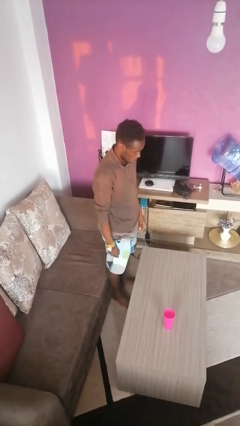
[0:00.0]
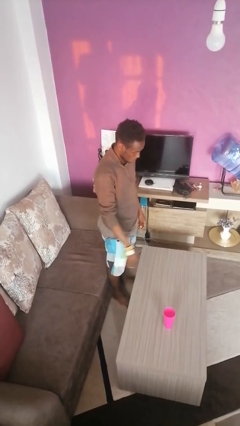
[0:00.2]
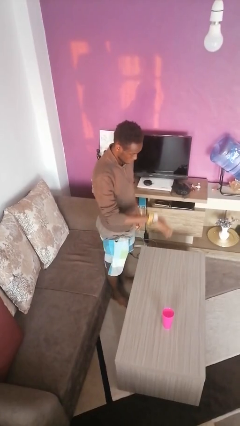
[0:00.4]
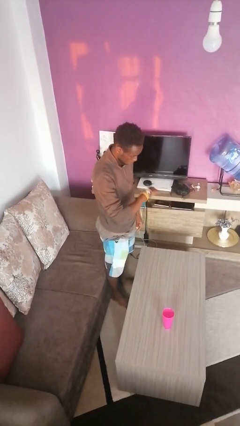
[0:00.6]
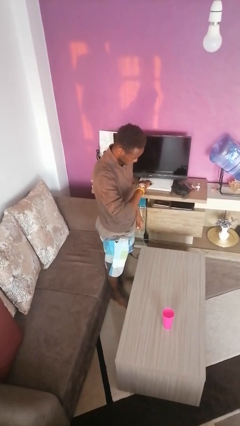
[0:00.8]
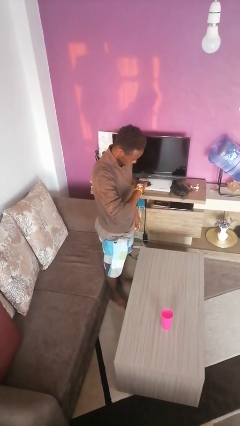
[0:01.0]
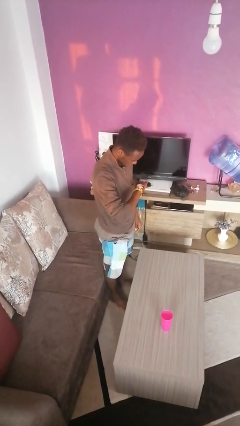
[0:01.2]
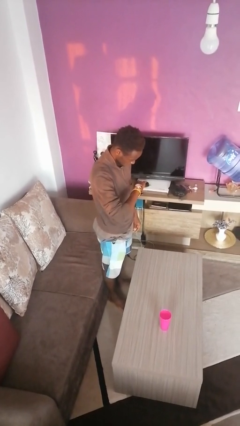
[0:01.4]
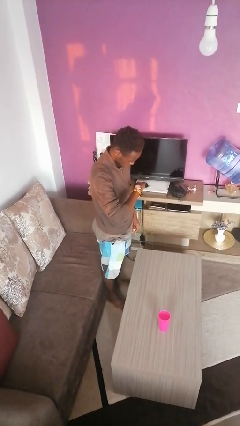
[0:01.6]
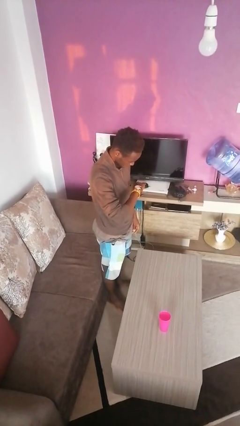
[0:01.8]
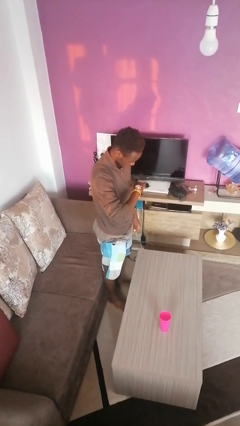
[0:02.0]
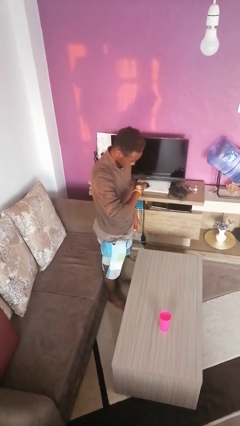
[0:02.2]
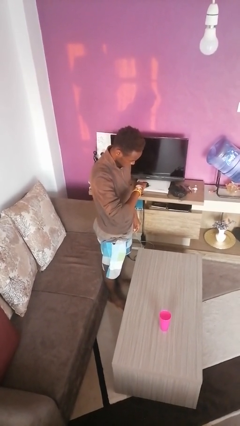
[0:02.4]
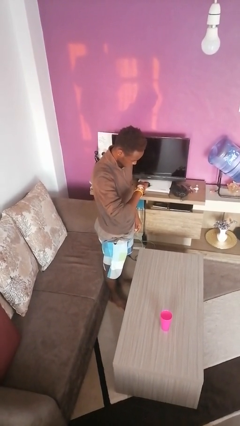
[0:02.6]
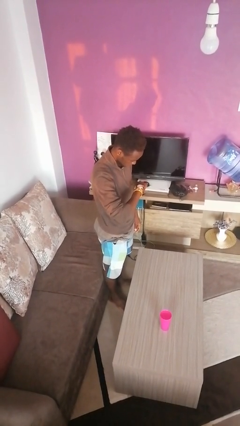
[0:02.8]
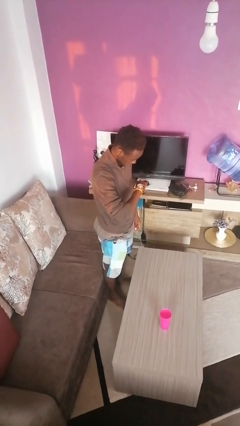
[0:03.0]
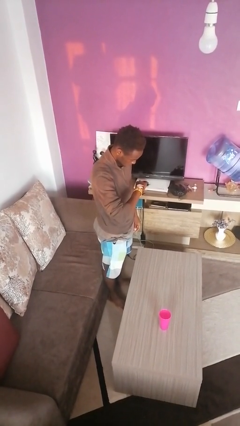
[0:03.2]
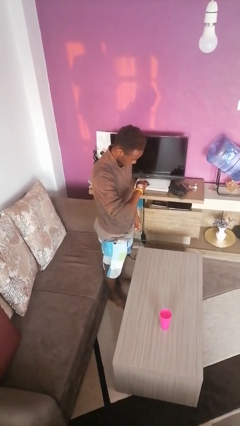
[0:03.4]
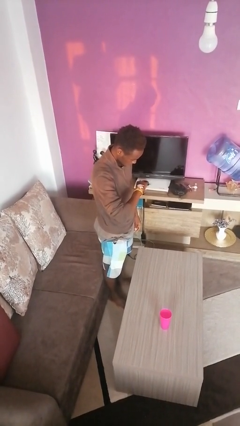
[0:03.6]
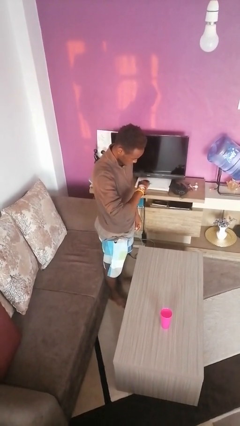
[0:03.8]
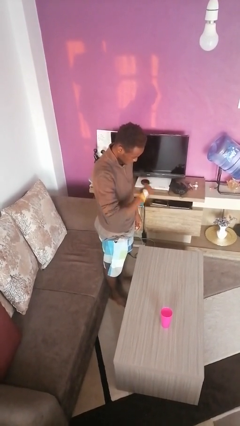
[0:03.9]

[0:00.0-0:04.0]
person looks at wristwatch

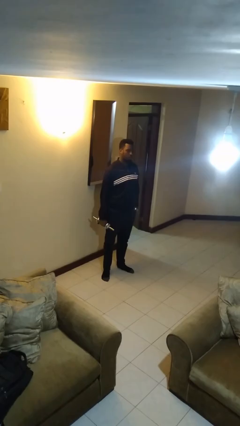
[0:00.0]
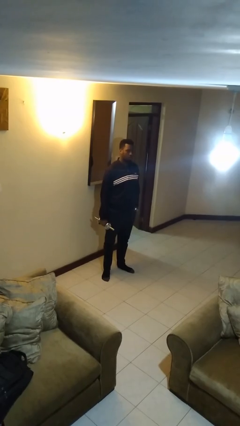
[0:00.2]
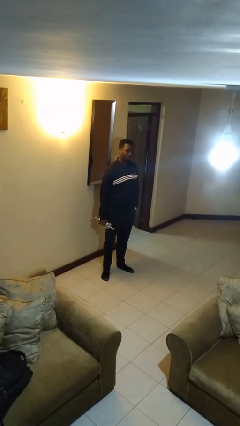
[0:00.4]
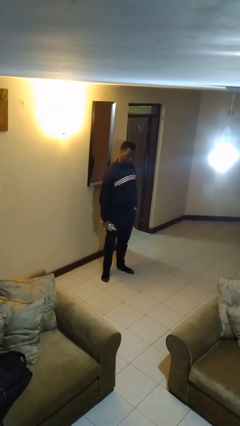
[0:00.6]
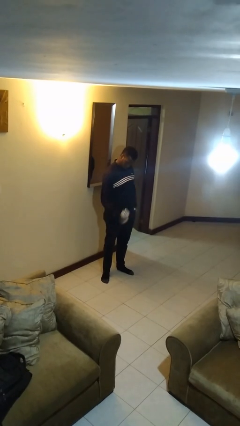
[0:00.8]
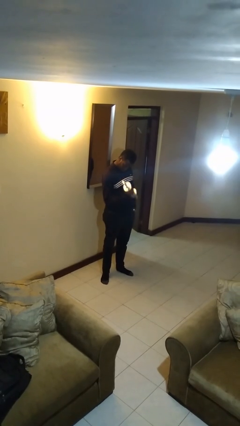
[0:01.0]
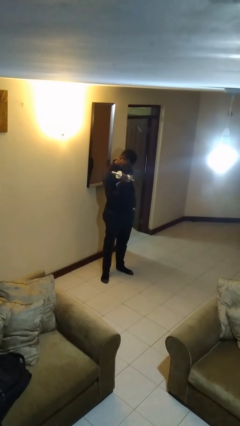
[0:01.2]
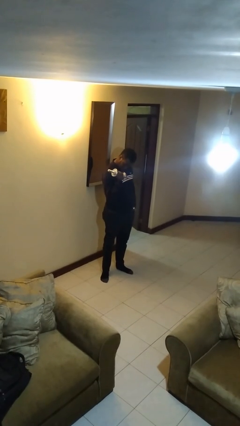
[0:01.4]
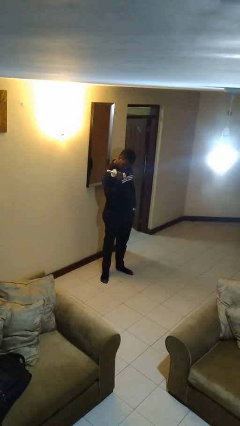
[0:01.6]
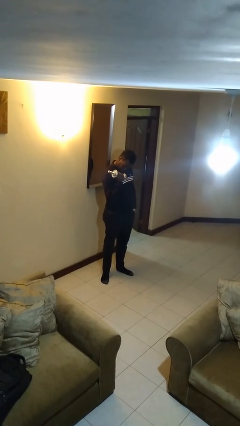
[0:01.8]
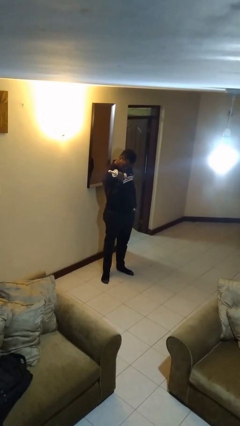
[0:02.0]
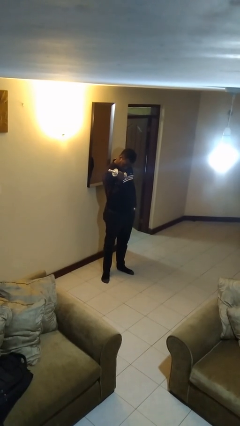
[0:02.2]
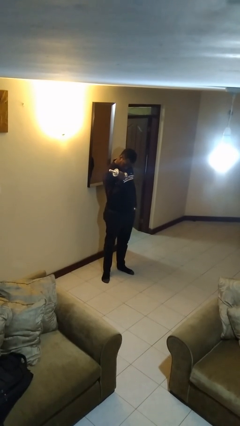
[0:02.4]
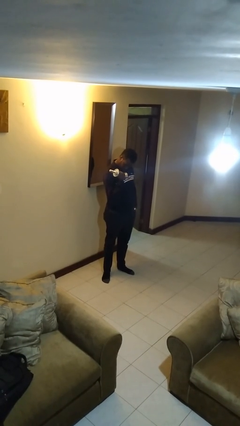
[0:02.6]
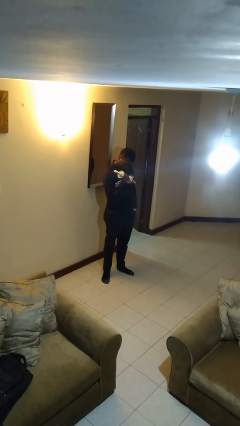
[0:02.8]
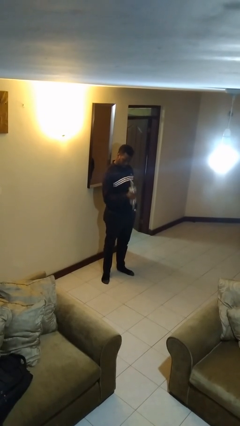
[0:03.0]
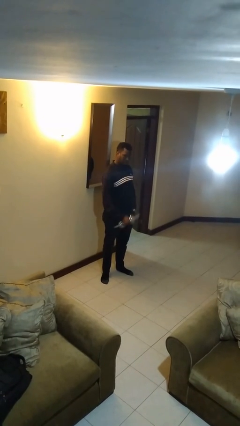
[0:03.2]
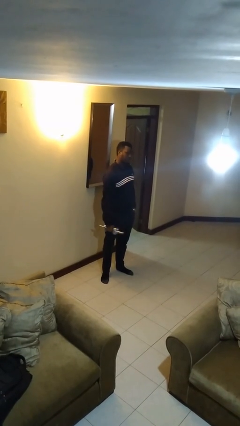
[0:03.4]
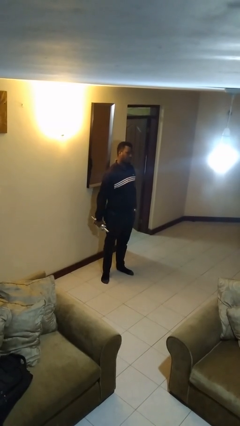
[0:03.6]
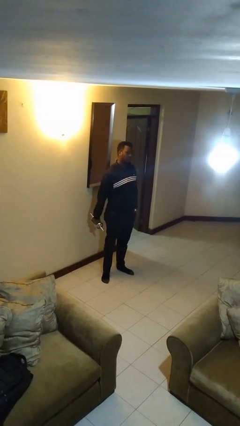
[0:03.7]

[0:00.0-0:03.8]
person lifts dumbbells

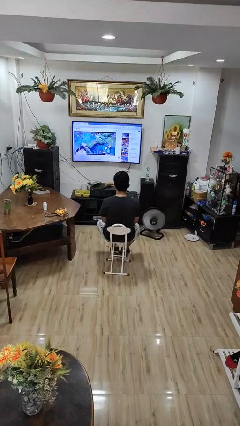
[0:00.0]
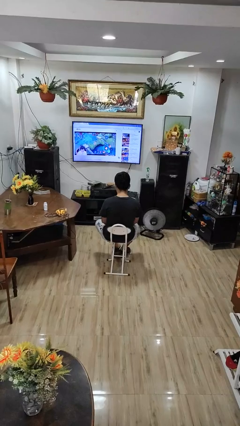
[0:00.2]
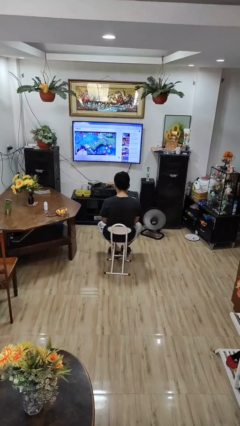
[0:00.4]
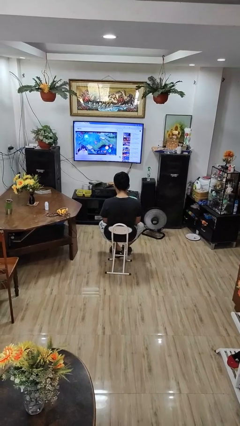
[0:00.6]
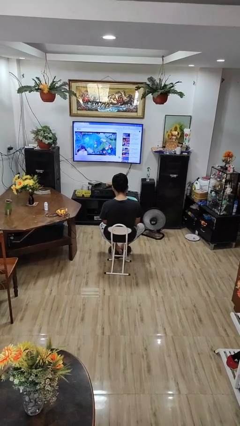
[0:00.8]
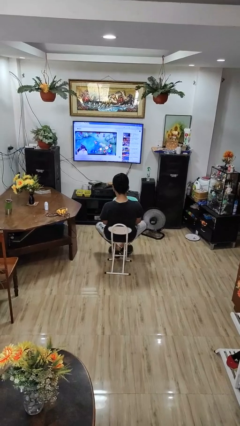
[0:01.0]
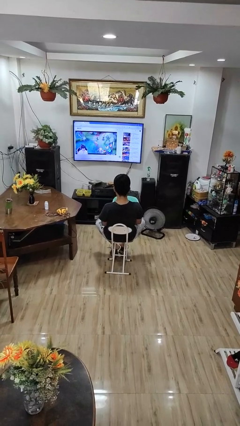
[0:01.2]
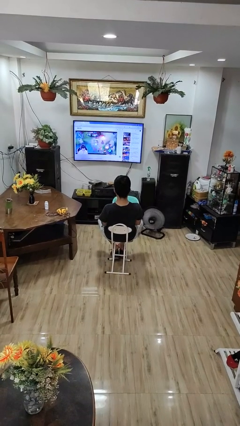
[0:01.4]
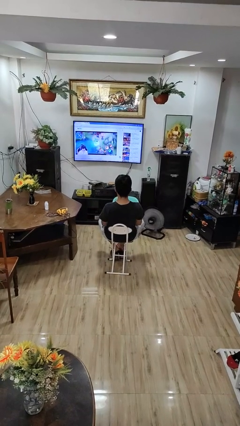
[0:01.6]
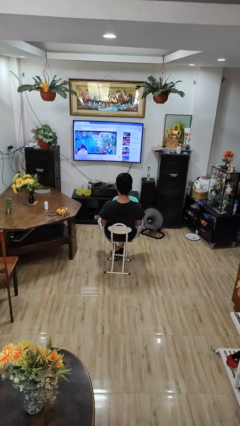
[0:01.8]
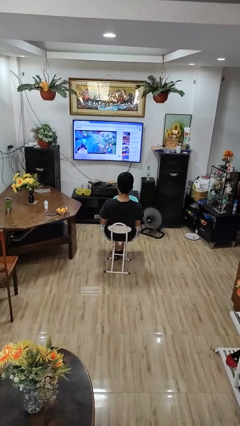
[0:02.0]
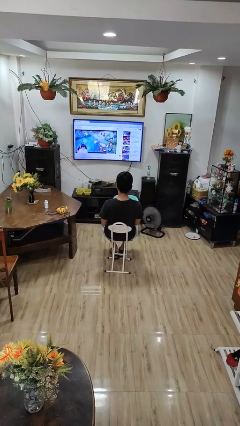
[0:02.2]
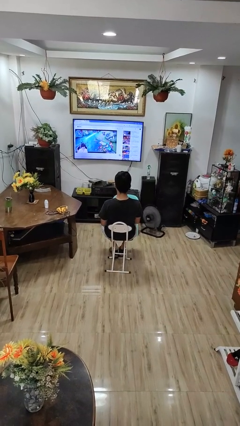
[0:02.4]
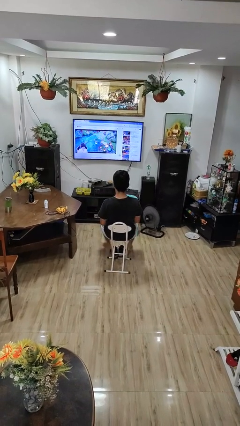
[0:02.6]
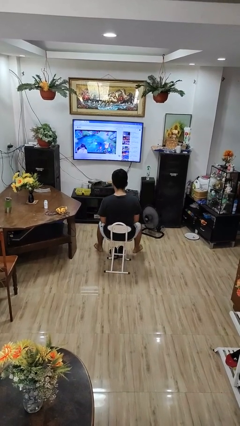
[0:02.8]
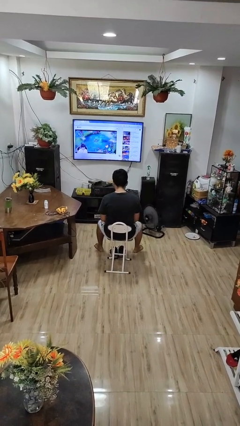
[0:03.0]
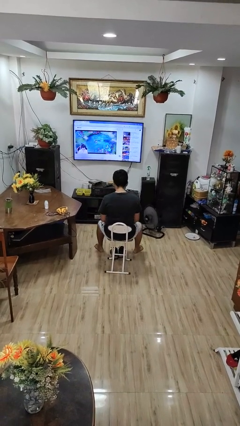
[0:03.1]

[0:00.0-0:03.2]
person takes off shoes

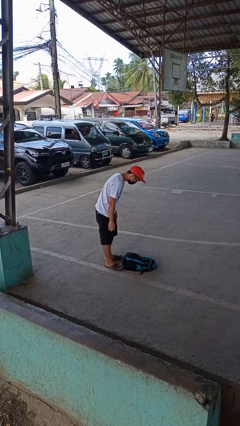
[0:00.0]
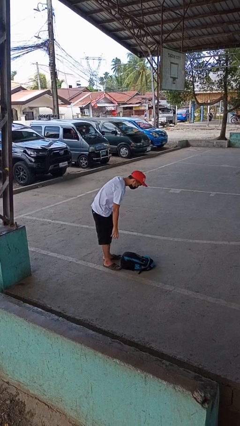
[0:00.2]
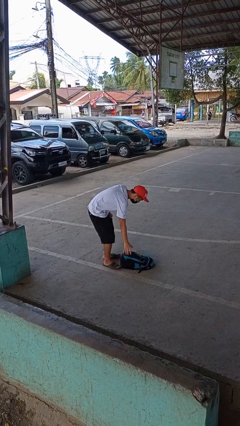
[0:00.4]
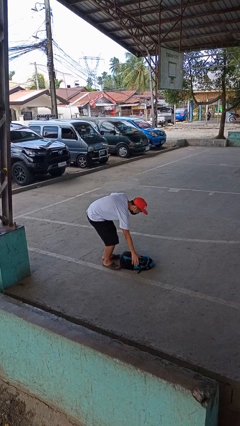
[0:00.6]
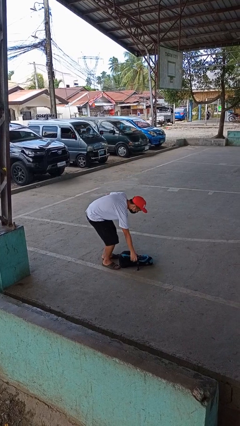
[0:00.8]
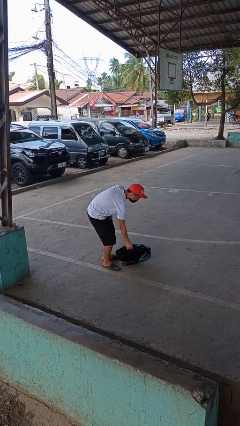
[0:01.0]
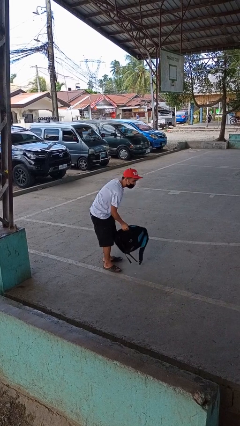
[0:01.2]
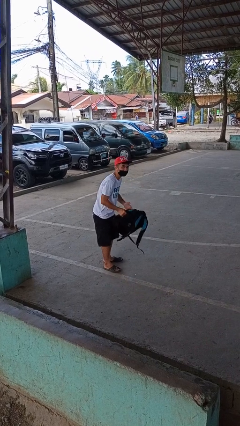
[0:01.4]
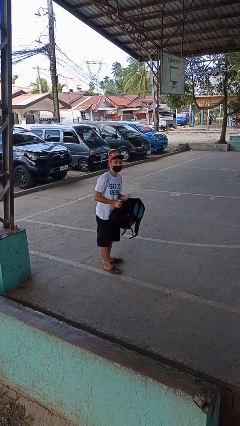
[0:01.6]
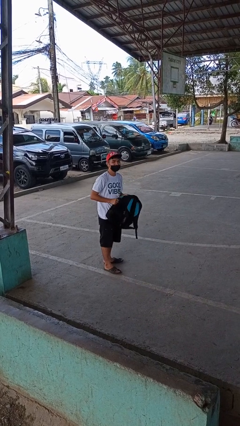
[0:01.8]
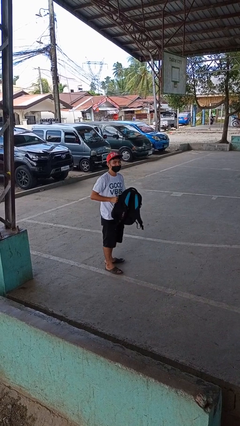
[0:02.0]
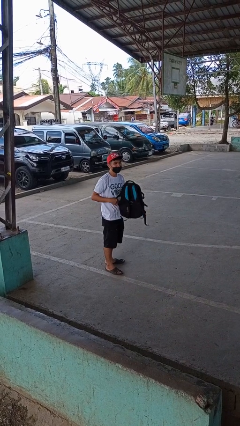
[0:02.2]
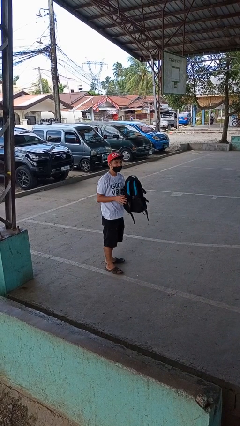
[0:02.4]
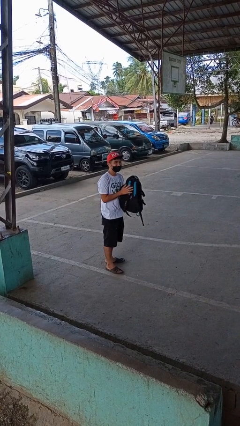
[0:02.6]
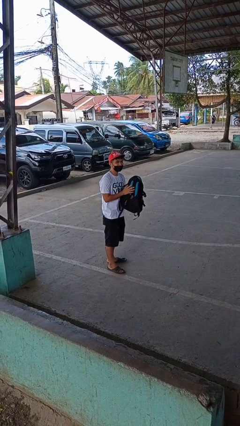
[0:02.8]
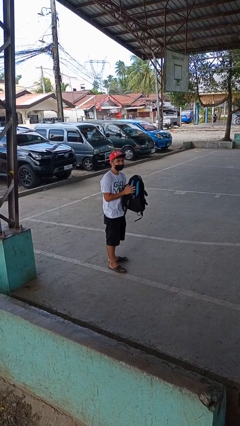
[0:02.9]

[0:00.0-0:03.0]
person picks up object from floor

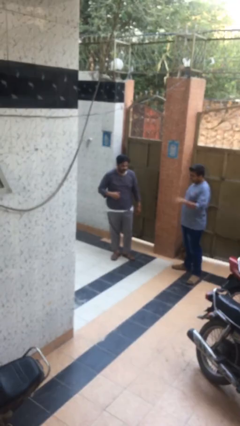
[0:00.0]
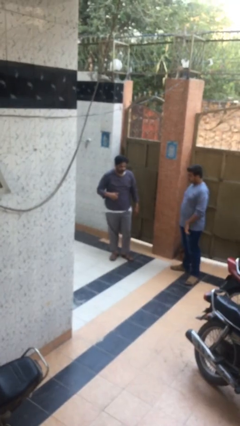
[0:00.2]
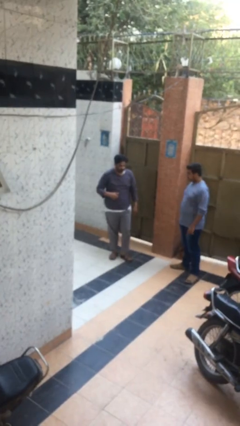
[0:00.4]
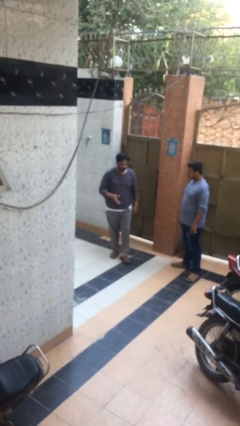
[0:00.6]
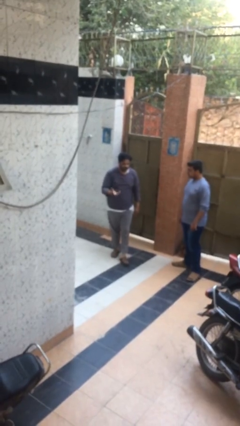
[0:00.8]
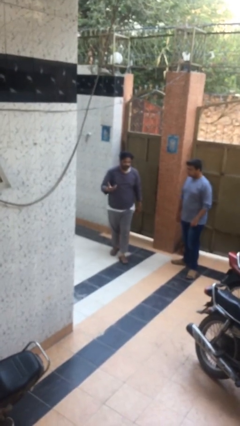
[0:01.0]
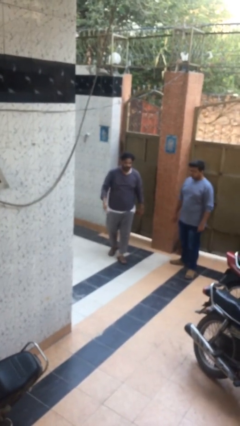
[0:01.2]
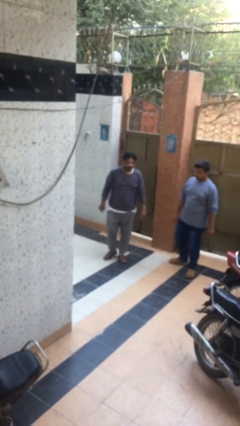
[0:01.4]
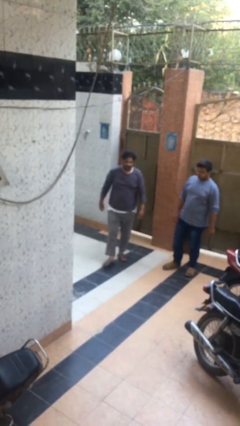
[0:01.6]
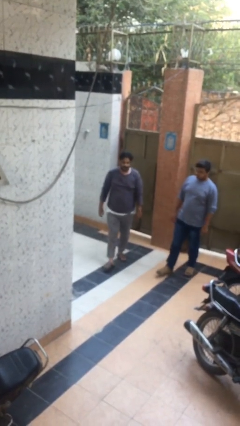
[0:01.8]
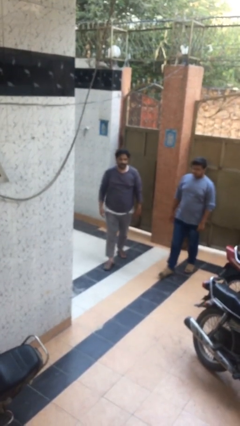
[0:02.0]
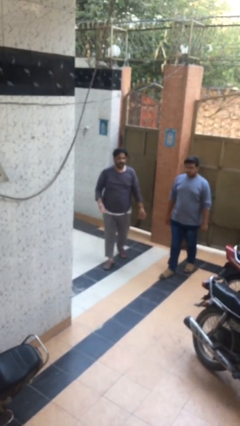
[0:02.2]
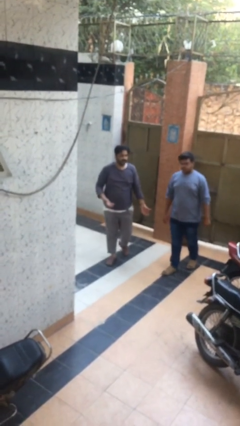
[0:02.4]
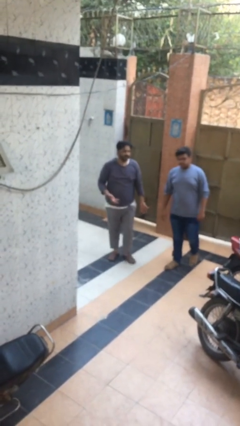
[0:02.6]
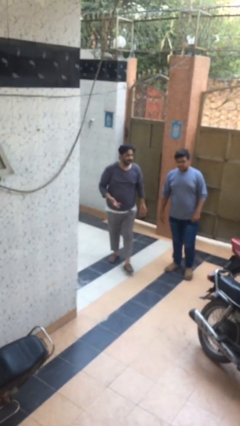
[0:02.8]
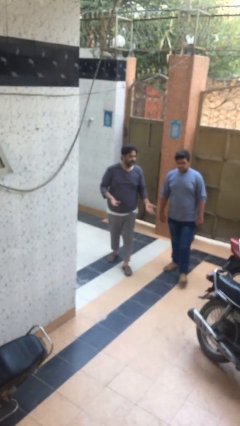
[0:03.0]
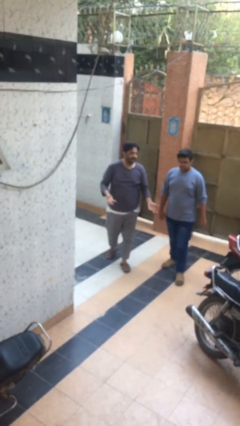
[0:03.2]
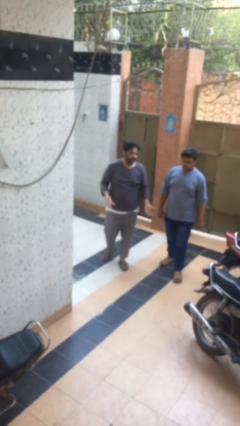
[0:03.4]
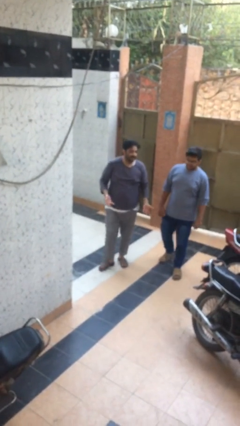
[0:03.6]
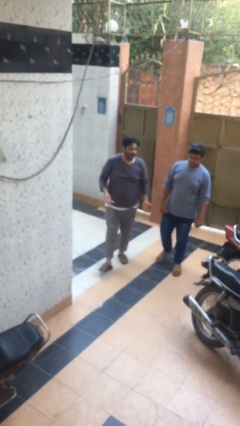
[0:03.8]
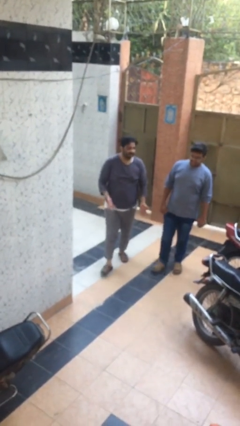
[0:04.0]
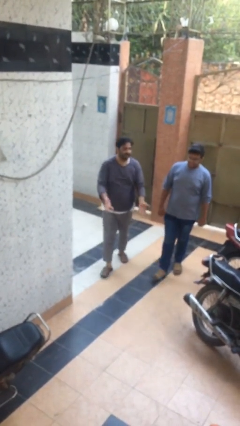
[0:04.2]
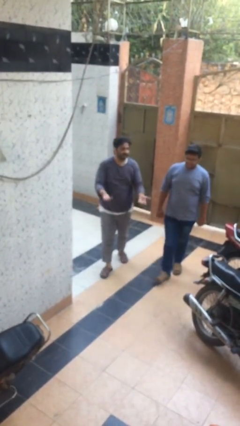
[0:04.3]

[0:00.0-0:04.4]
person talks to person
